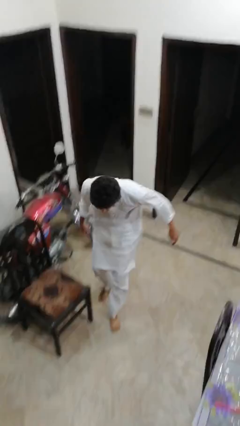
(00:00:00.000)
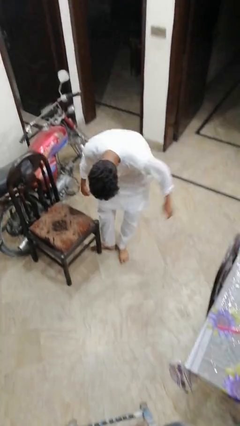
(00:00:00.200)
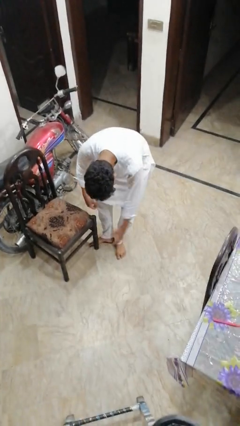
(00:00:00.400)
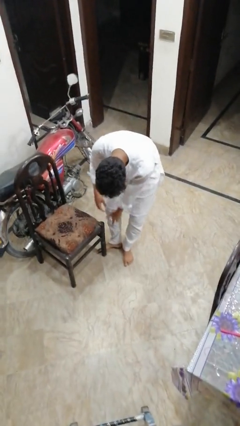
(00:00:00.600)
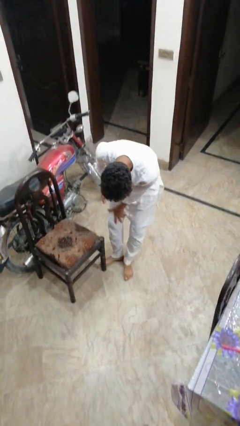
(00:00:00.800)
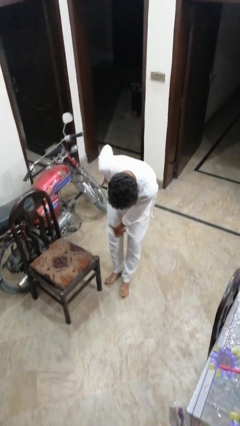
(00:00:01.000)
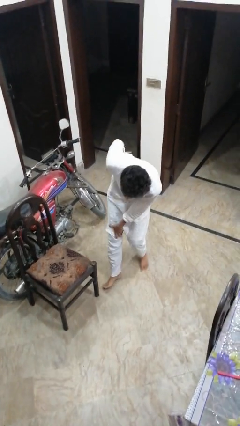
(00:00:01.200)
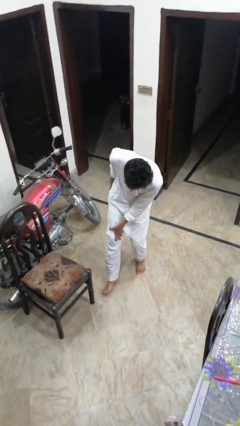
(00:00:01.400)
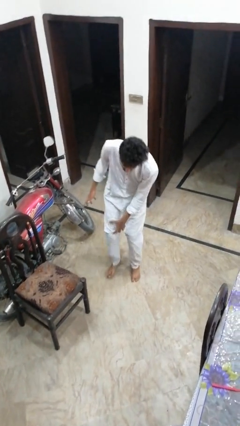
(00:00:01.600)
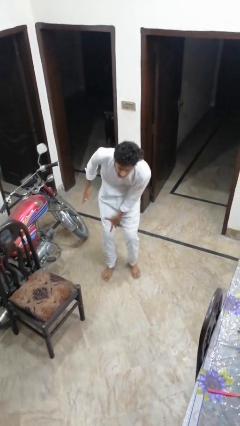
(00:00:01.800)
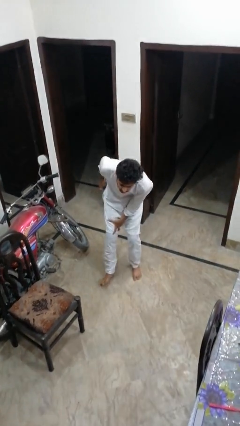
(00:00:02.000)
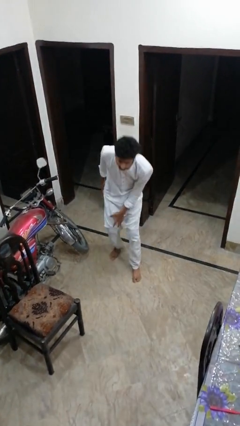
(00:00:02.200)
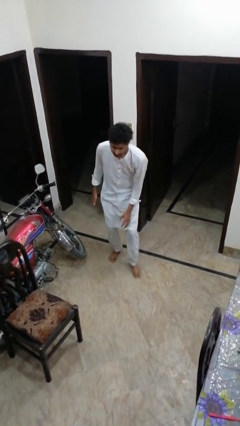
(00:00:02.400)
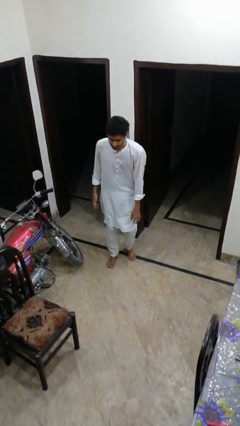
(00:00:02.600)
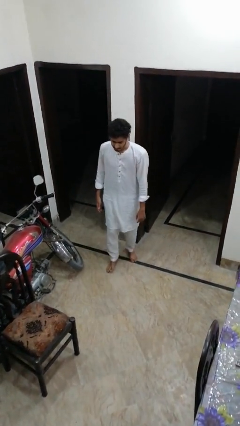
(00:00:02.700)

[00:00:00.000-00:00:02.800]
person stubs toe

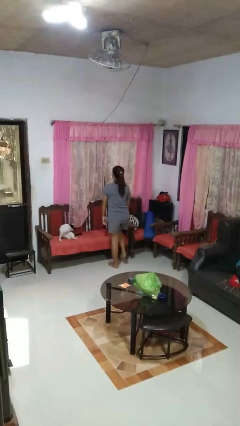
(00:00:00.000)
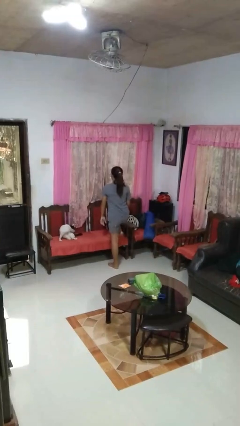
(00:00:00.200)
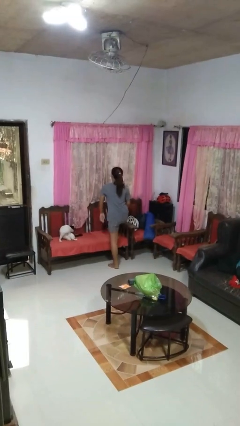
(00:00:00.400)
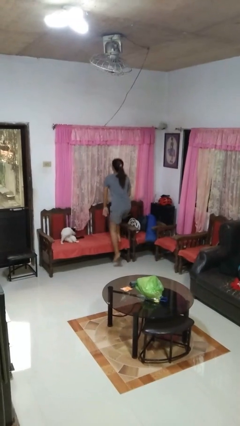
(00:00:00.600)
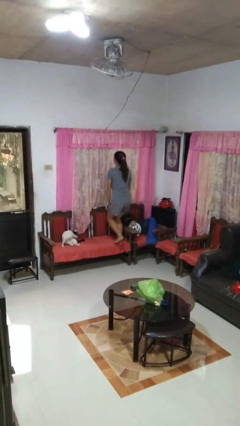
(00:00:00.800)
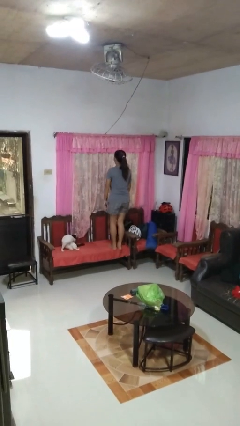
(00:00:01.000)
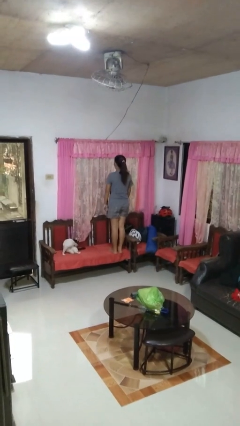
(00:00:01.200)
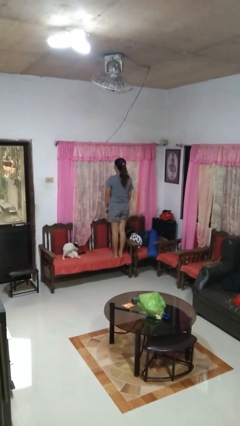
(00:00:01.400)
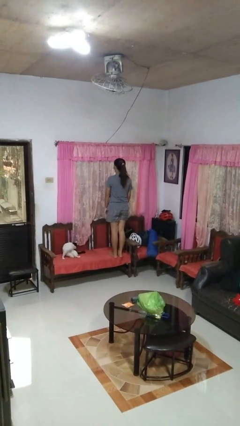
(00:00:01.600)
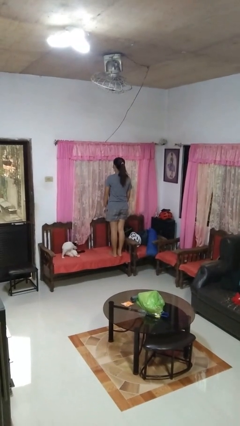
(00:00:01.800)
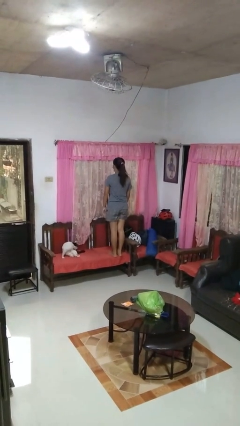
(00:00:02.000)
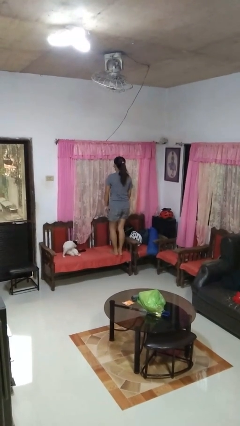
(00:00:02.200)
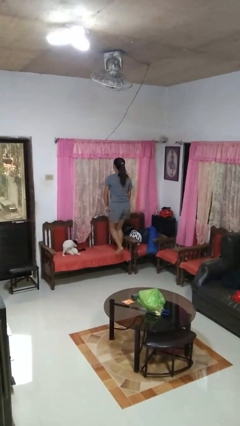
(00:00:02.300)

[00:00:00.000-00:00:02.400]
person climbs on chair

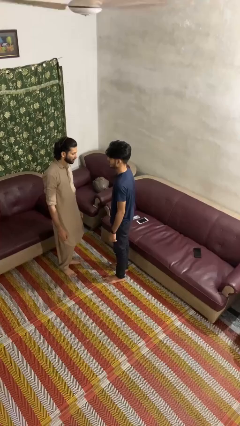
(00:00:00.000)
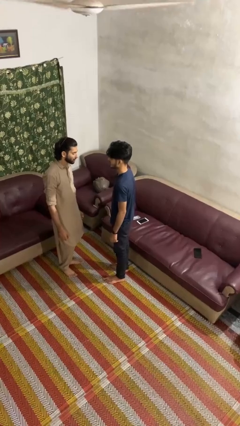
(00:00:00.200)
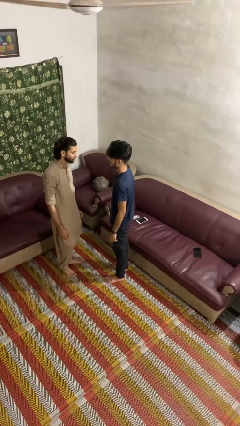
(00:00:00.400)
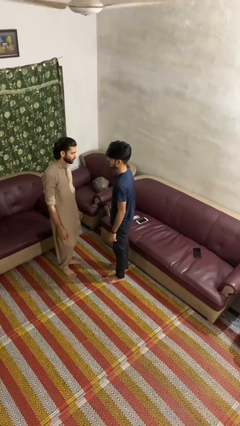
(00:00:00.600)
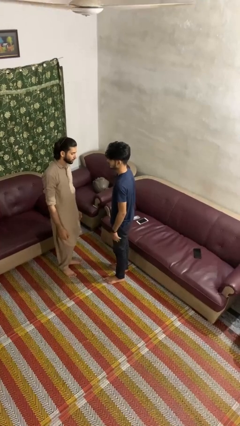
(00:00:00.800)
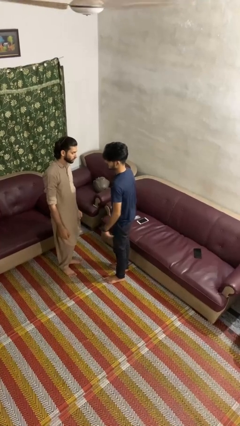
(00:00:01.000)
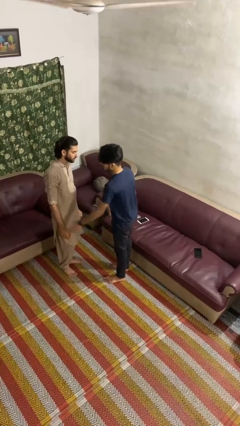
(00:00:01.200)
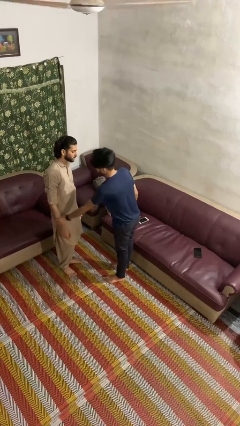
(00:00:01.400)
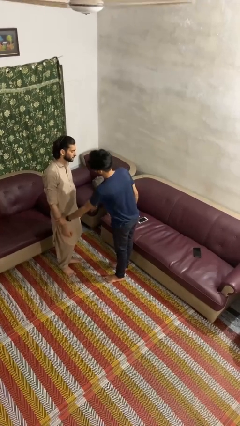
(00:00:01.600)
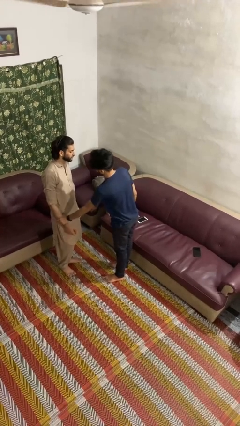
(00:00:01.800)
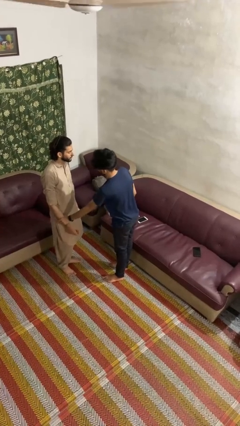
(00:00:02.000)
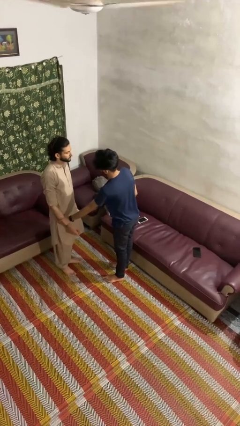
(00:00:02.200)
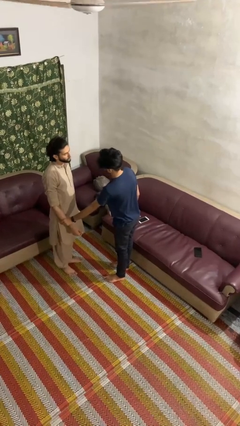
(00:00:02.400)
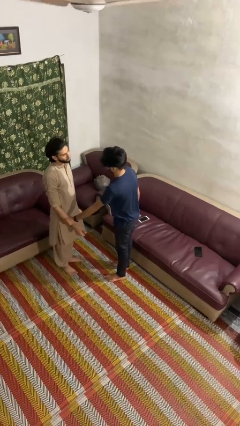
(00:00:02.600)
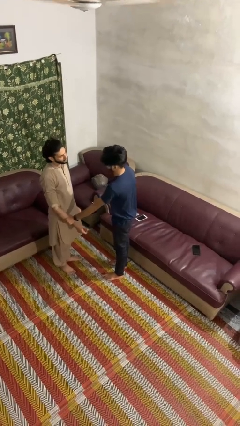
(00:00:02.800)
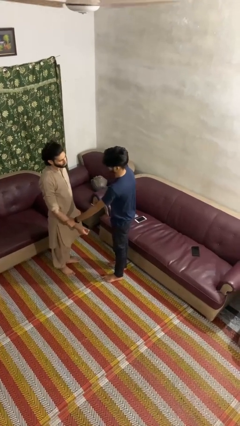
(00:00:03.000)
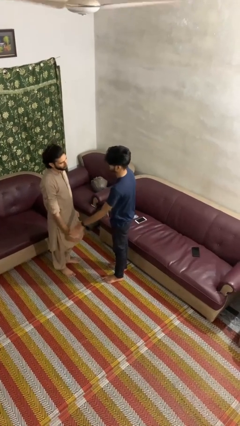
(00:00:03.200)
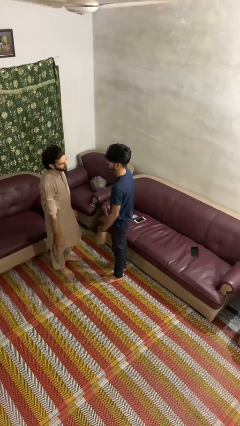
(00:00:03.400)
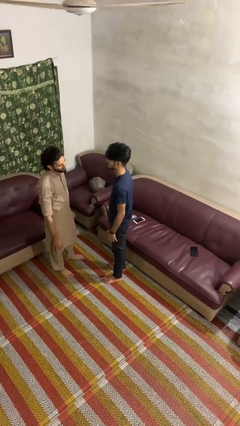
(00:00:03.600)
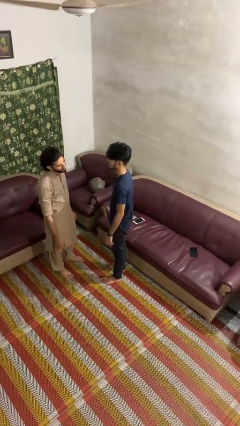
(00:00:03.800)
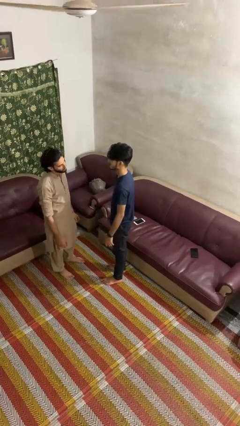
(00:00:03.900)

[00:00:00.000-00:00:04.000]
person grabs person by forearm

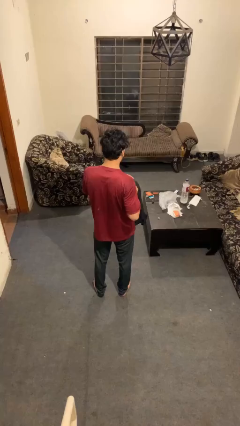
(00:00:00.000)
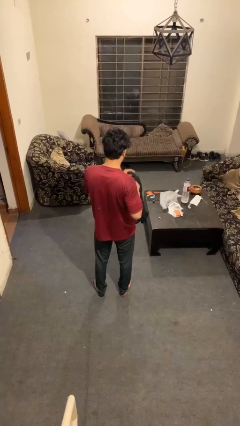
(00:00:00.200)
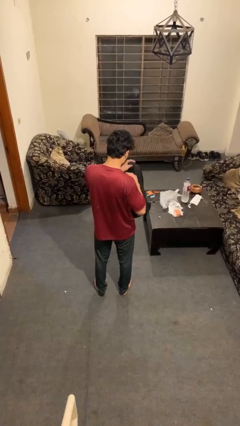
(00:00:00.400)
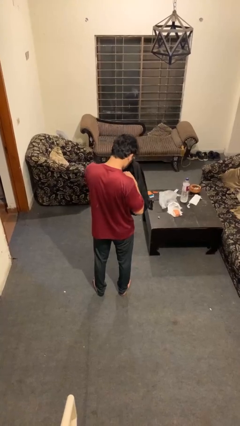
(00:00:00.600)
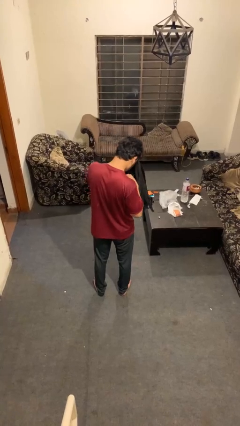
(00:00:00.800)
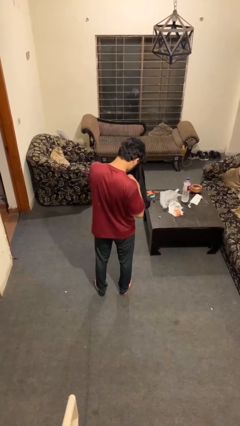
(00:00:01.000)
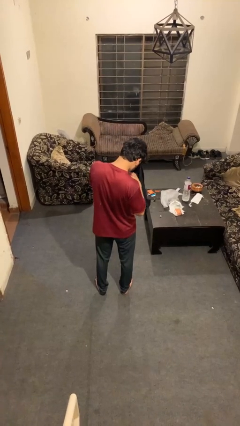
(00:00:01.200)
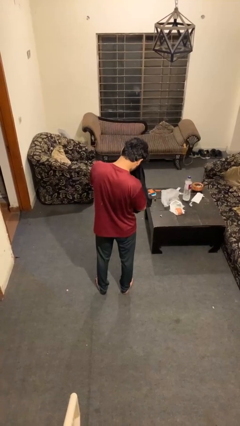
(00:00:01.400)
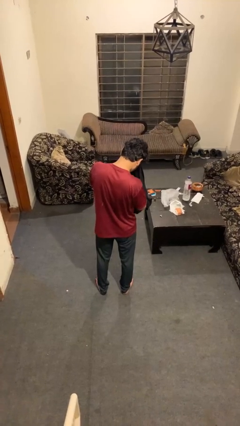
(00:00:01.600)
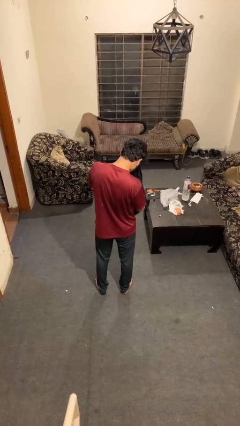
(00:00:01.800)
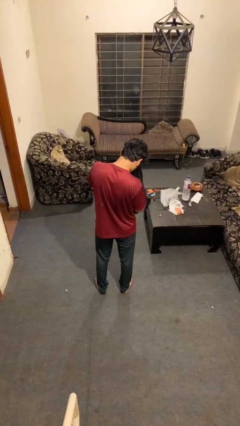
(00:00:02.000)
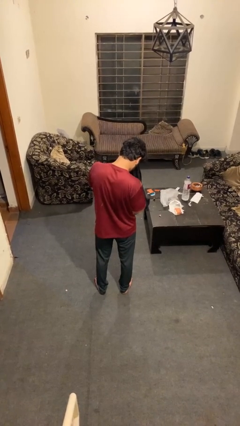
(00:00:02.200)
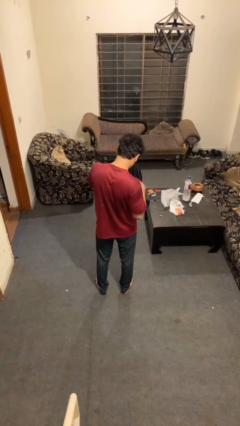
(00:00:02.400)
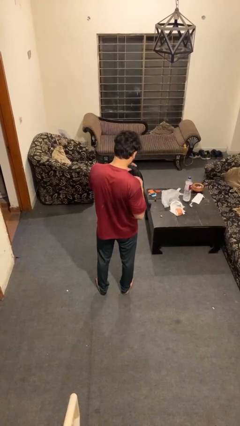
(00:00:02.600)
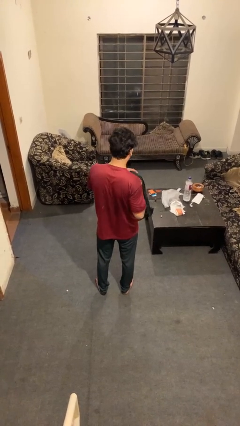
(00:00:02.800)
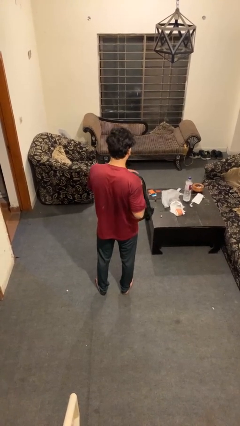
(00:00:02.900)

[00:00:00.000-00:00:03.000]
person searches in bag

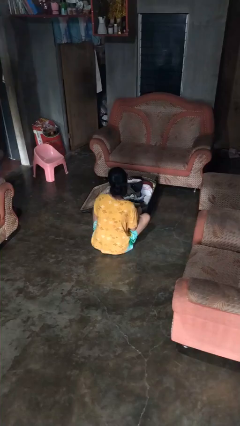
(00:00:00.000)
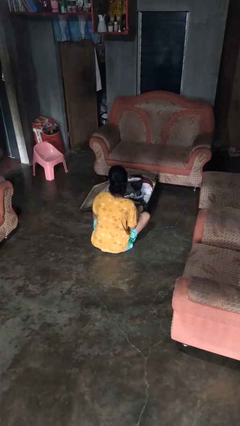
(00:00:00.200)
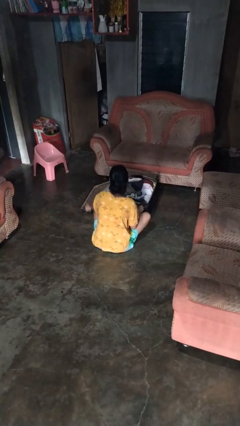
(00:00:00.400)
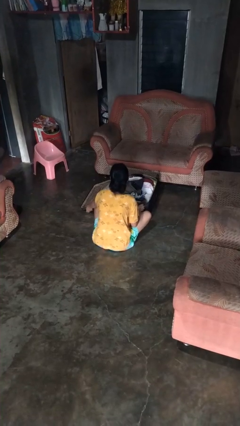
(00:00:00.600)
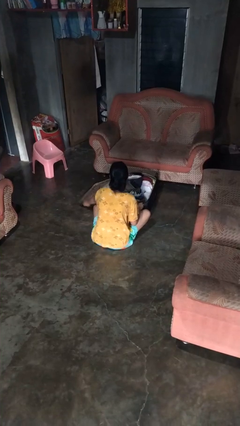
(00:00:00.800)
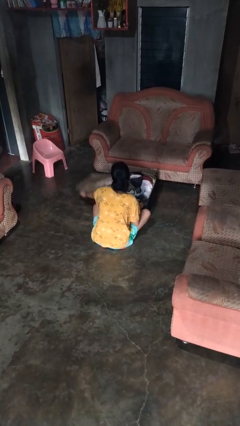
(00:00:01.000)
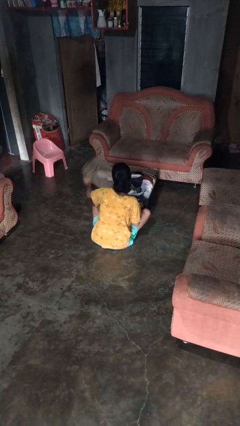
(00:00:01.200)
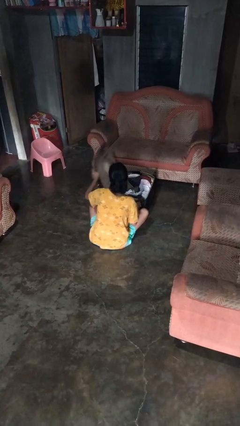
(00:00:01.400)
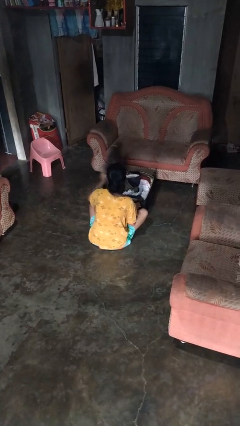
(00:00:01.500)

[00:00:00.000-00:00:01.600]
person closes suitcase

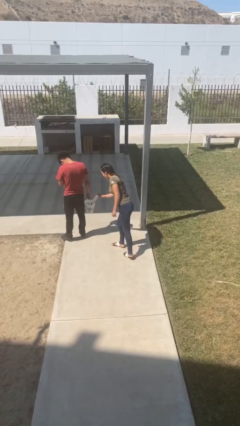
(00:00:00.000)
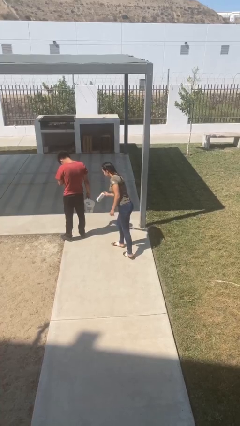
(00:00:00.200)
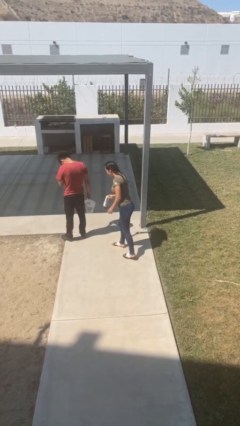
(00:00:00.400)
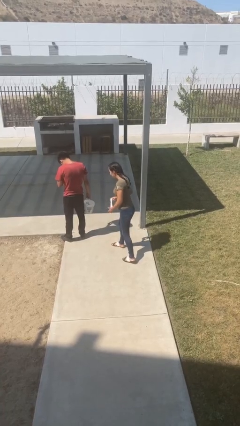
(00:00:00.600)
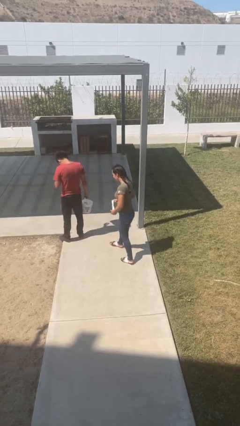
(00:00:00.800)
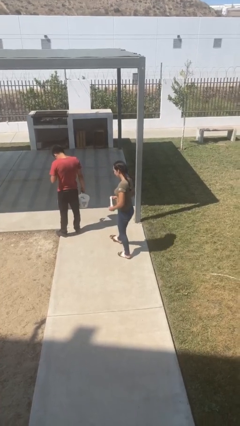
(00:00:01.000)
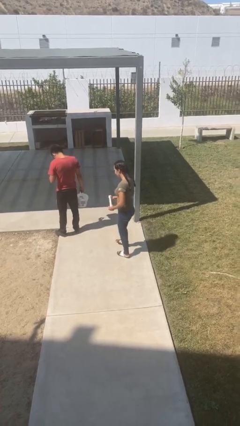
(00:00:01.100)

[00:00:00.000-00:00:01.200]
person steals object from person

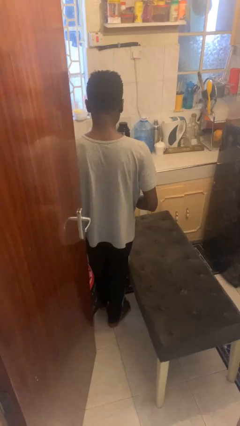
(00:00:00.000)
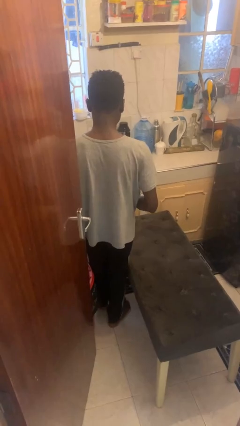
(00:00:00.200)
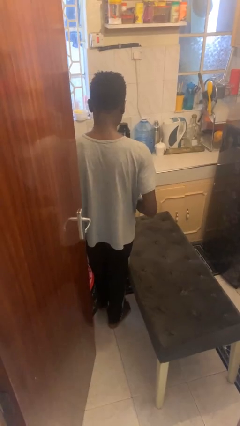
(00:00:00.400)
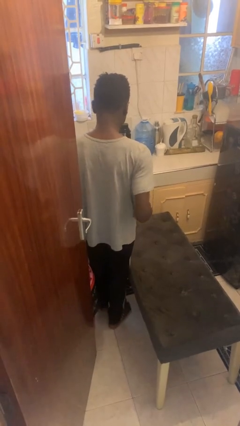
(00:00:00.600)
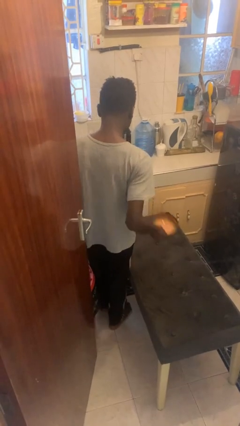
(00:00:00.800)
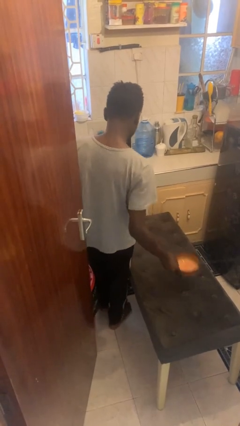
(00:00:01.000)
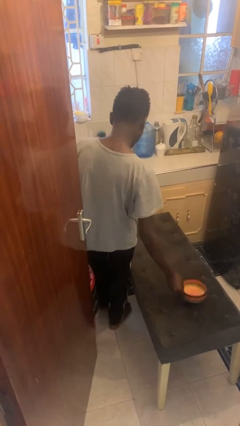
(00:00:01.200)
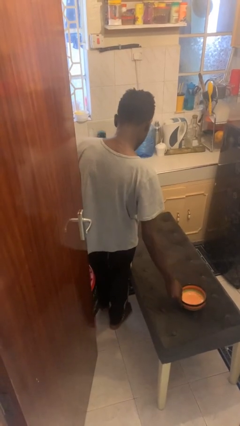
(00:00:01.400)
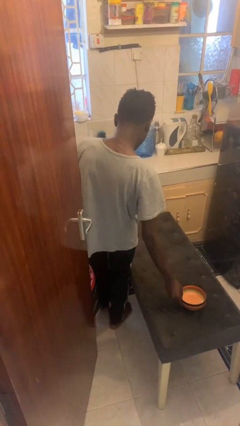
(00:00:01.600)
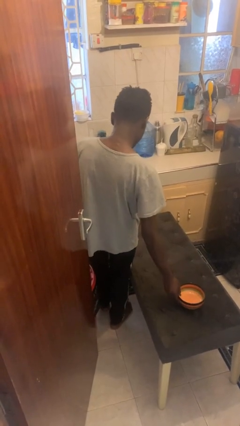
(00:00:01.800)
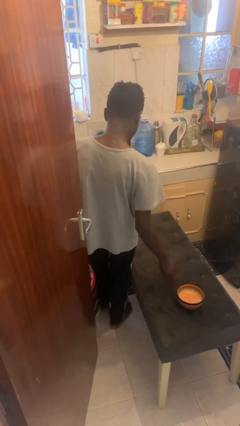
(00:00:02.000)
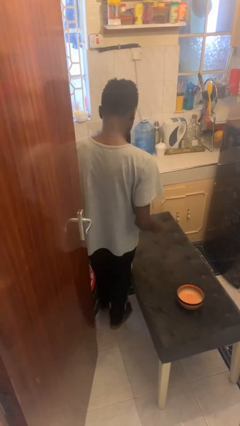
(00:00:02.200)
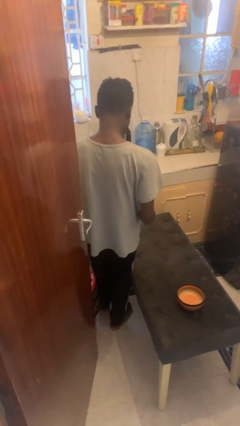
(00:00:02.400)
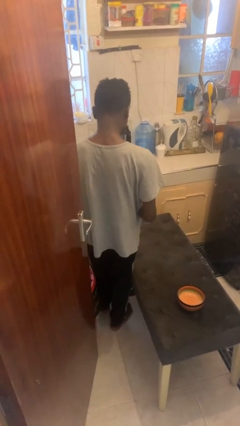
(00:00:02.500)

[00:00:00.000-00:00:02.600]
person sets table
